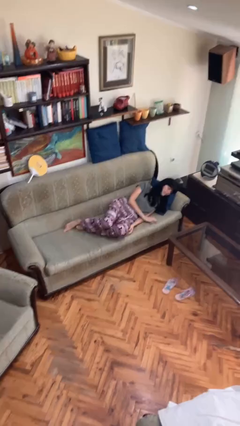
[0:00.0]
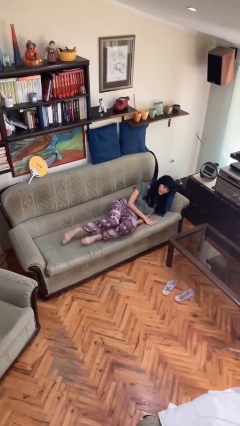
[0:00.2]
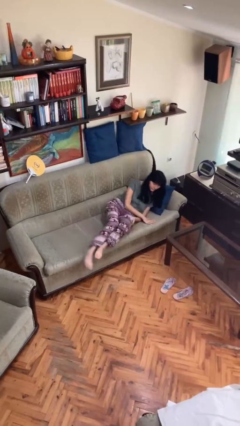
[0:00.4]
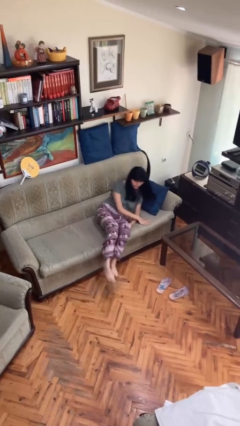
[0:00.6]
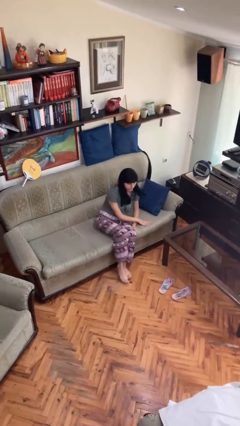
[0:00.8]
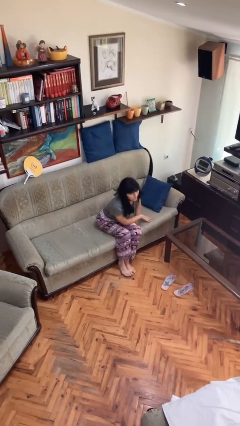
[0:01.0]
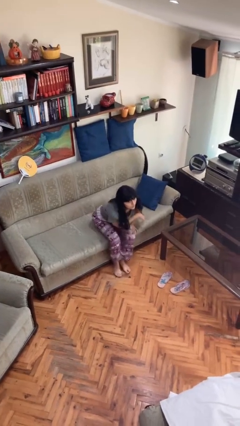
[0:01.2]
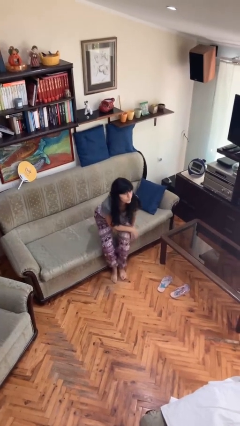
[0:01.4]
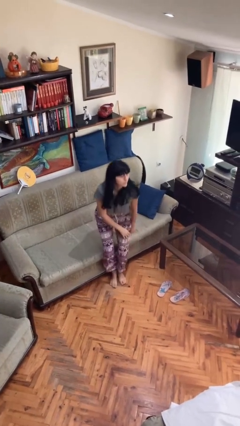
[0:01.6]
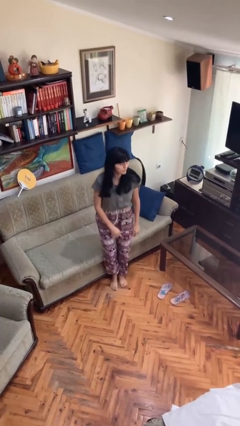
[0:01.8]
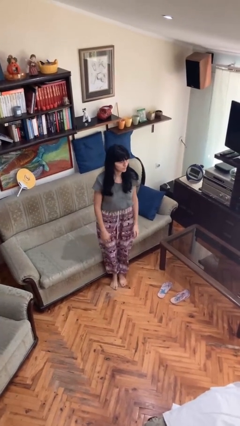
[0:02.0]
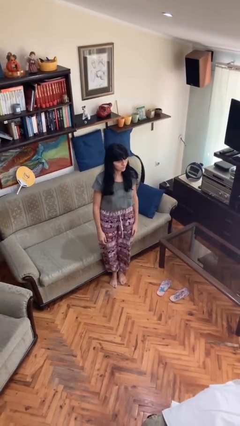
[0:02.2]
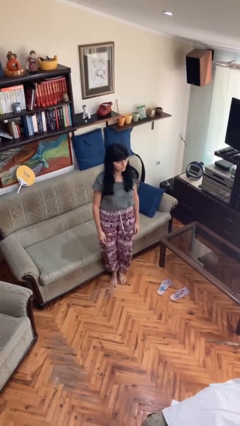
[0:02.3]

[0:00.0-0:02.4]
person stands up

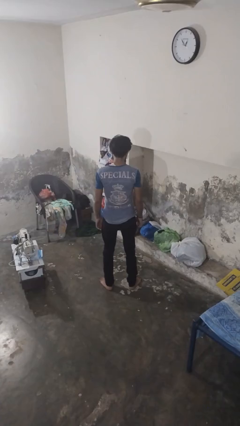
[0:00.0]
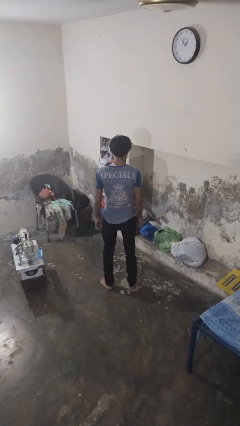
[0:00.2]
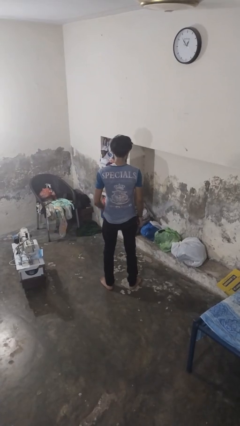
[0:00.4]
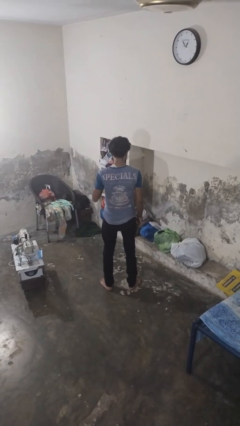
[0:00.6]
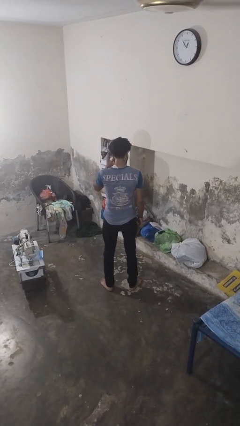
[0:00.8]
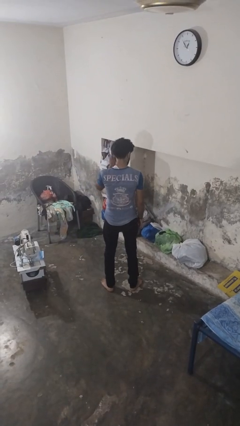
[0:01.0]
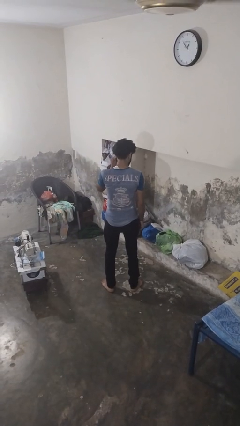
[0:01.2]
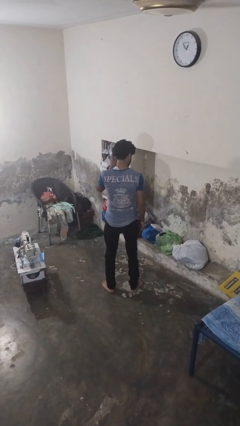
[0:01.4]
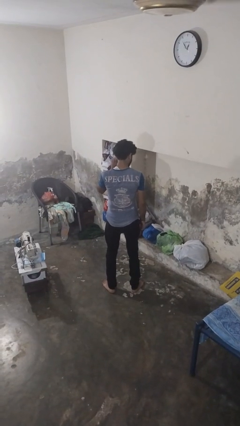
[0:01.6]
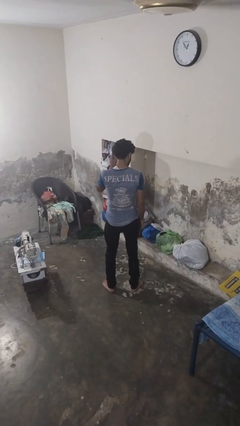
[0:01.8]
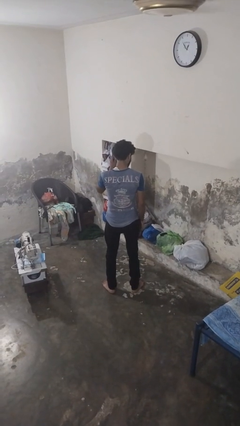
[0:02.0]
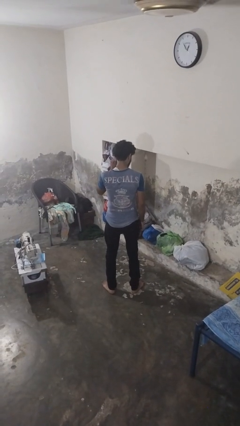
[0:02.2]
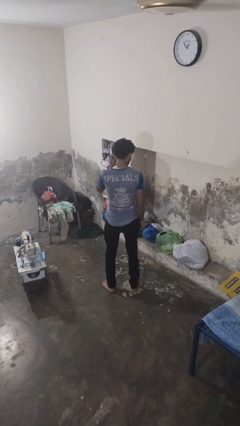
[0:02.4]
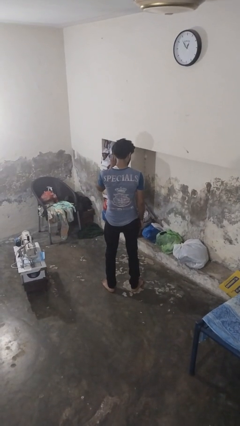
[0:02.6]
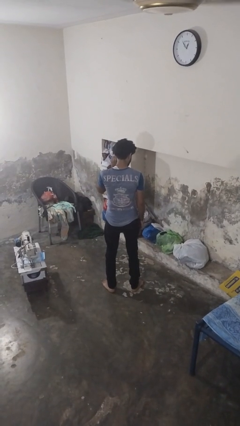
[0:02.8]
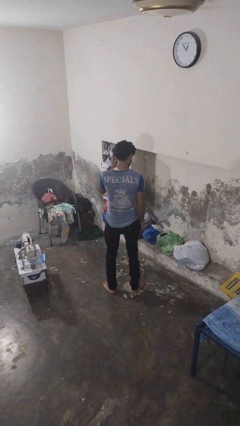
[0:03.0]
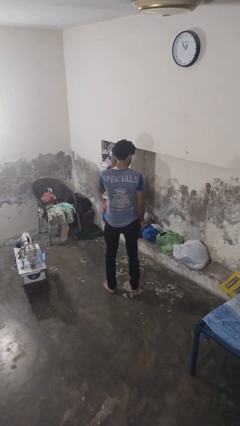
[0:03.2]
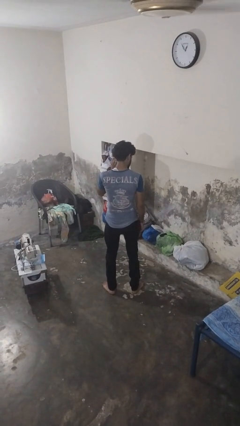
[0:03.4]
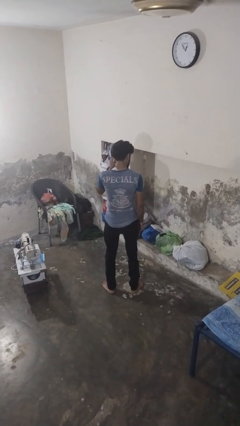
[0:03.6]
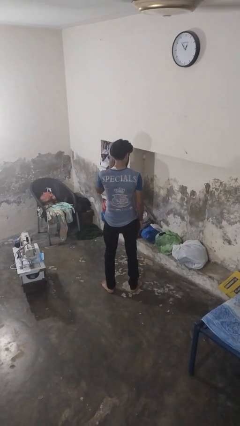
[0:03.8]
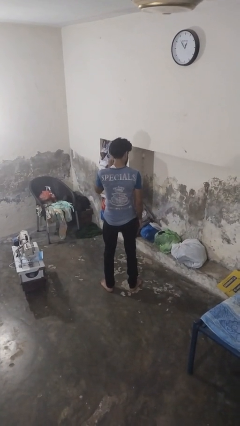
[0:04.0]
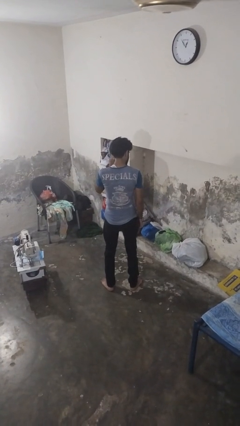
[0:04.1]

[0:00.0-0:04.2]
person touches earlobe

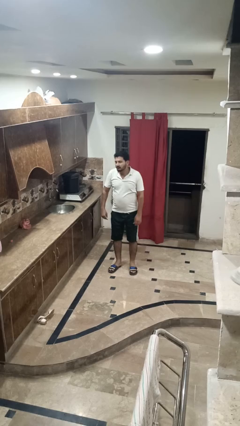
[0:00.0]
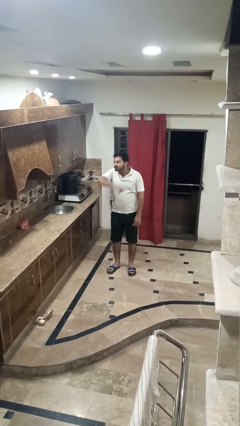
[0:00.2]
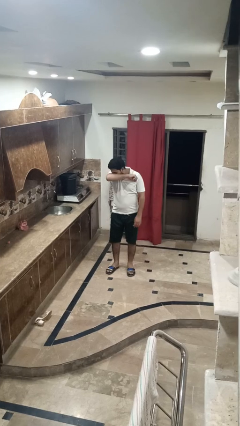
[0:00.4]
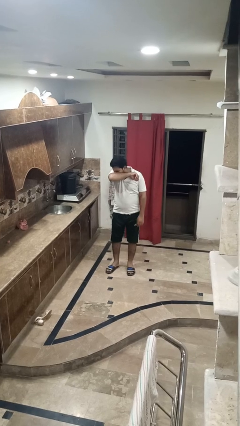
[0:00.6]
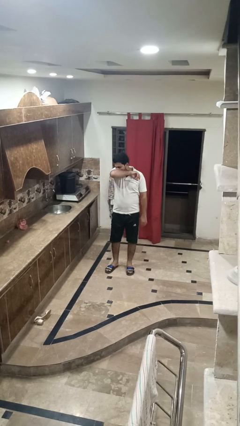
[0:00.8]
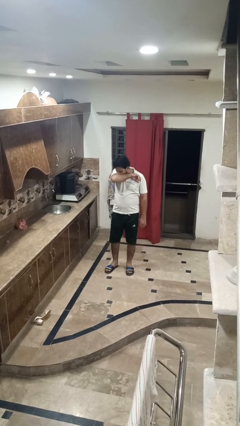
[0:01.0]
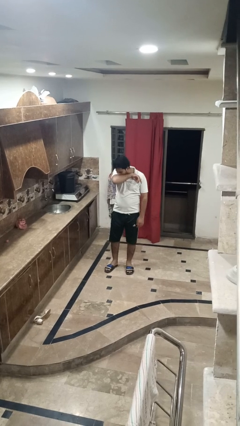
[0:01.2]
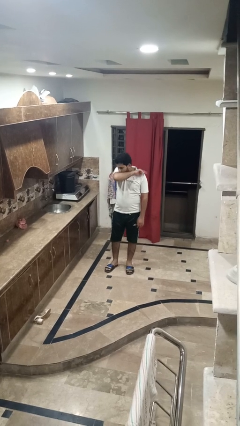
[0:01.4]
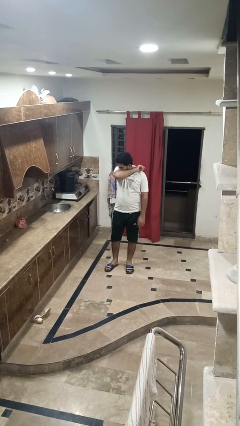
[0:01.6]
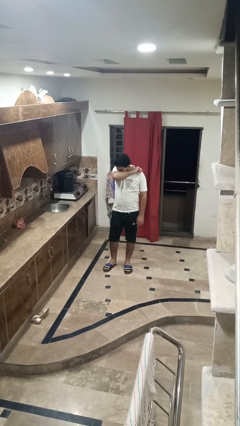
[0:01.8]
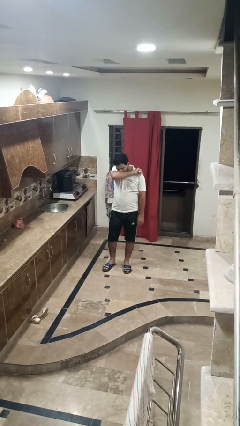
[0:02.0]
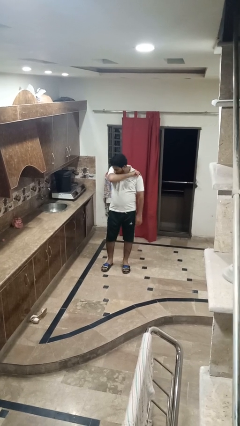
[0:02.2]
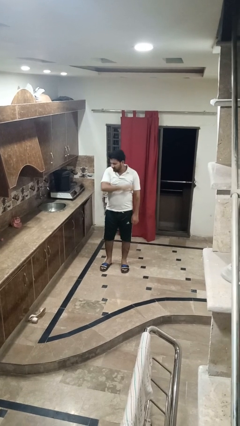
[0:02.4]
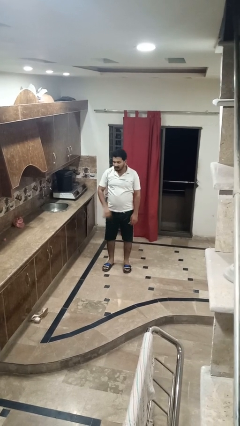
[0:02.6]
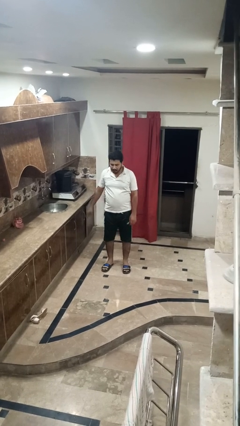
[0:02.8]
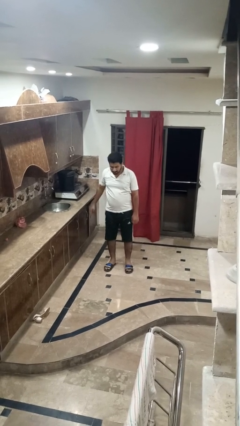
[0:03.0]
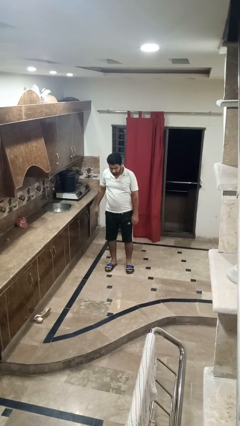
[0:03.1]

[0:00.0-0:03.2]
person sneezes into arm

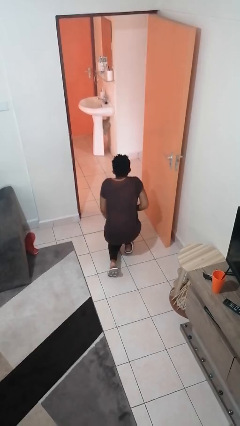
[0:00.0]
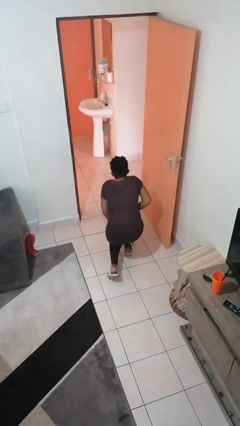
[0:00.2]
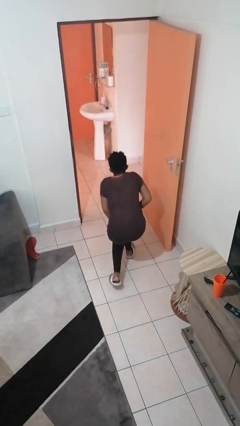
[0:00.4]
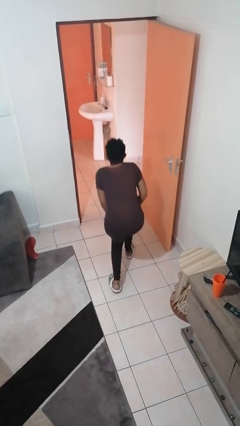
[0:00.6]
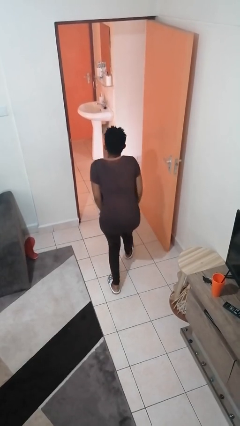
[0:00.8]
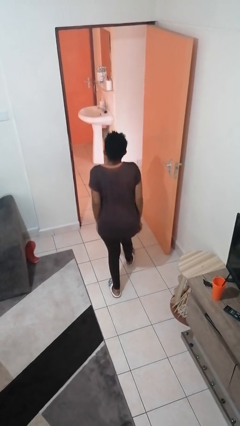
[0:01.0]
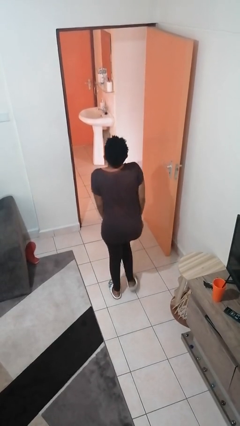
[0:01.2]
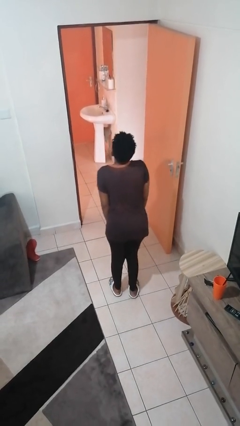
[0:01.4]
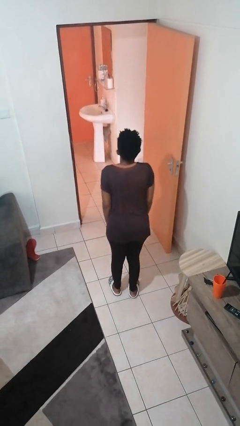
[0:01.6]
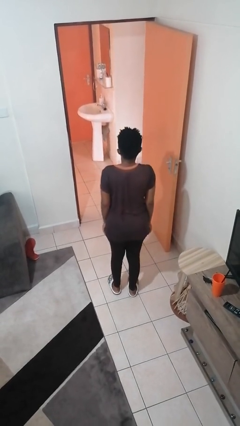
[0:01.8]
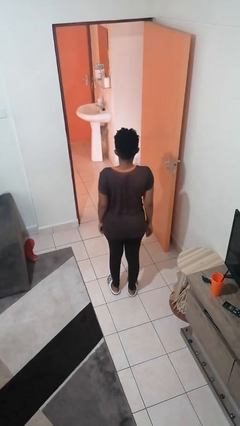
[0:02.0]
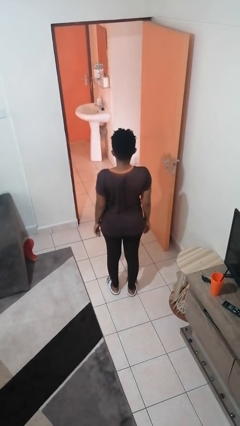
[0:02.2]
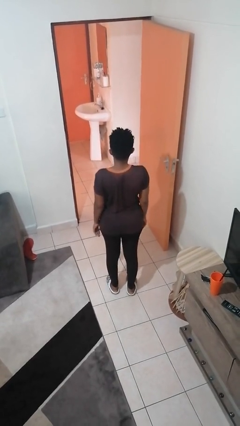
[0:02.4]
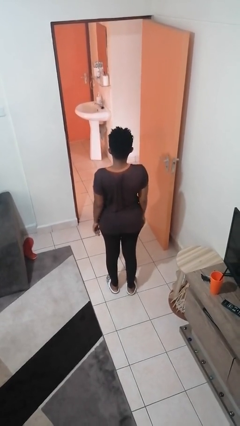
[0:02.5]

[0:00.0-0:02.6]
person stands up from floor

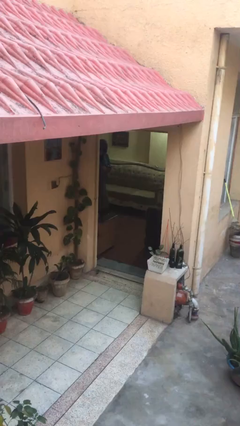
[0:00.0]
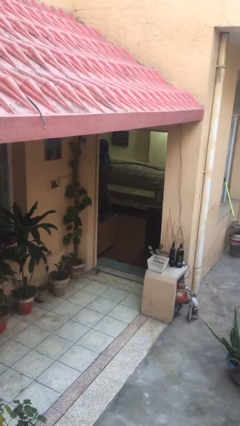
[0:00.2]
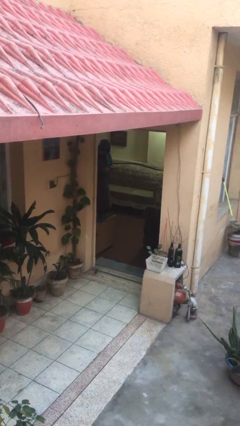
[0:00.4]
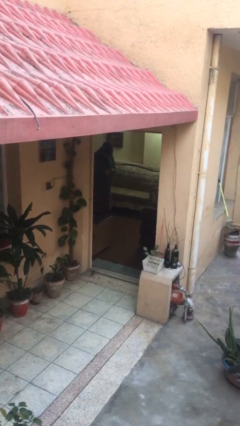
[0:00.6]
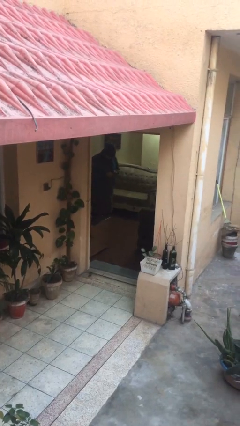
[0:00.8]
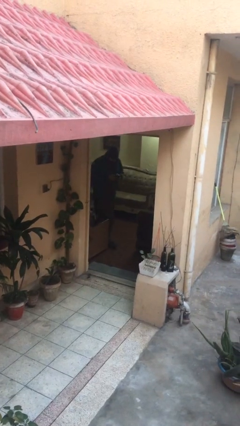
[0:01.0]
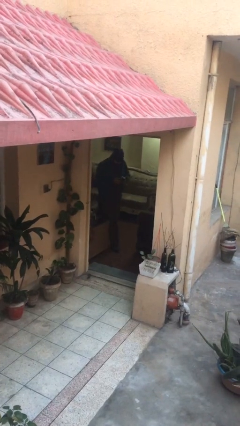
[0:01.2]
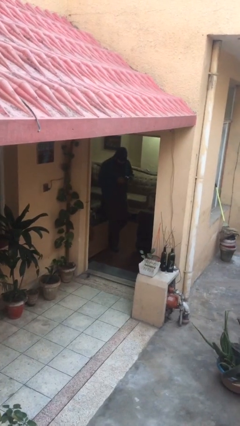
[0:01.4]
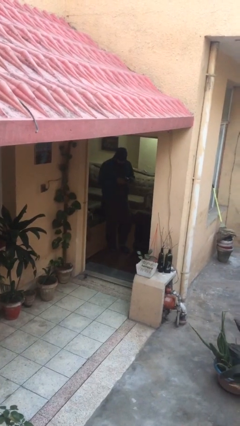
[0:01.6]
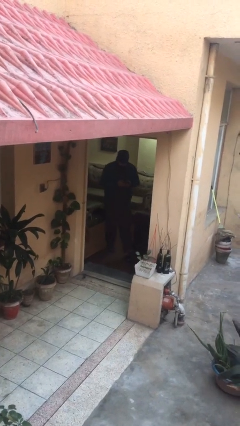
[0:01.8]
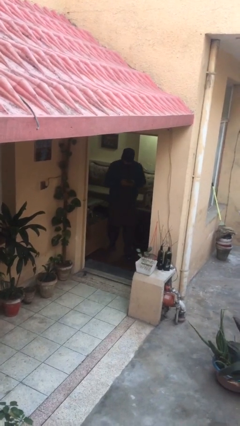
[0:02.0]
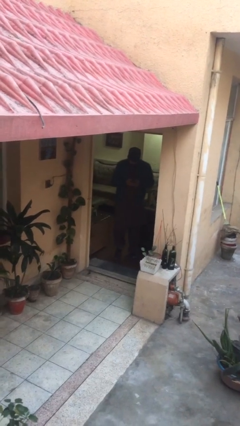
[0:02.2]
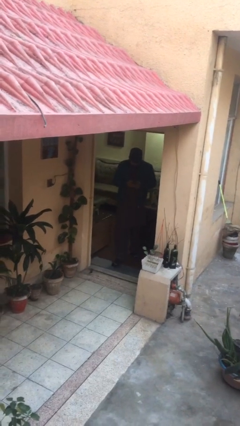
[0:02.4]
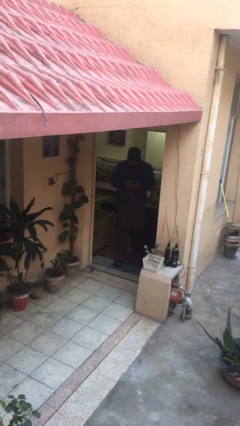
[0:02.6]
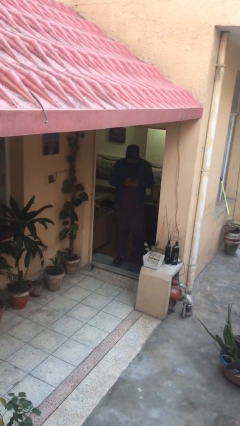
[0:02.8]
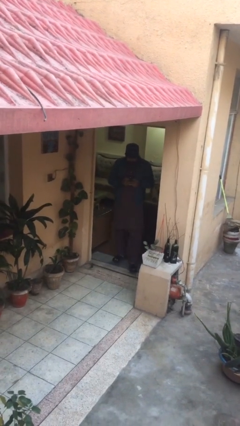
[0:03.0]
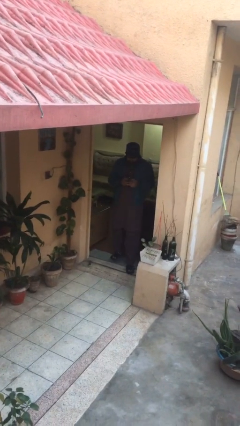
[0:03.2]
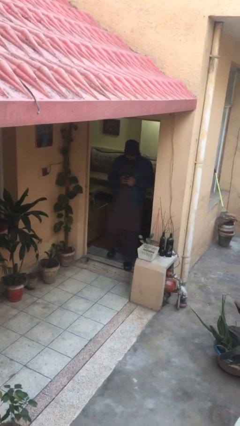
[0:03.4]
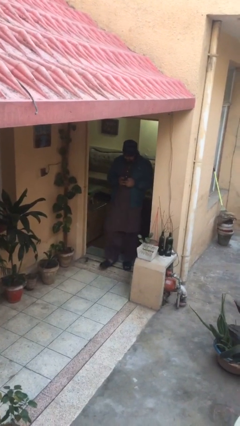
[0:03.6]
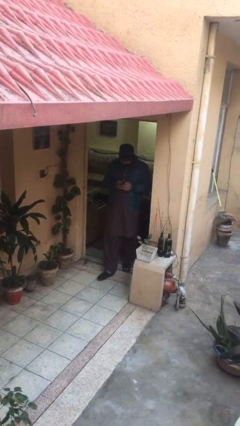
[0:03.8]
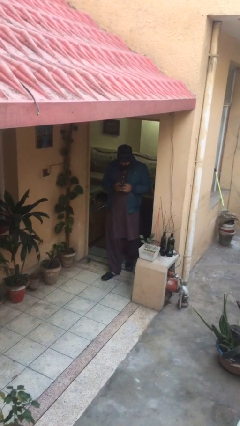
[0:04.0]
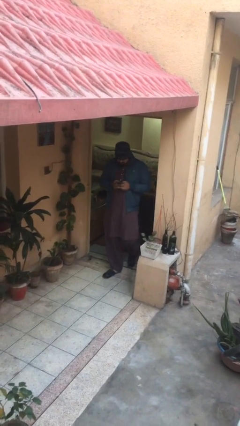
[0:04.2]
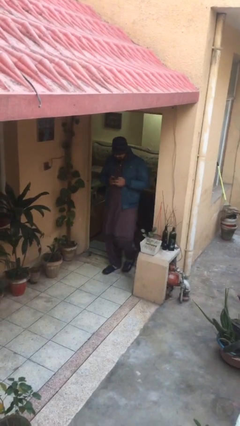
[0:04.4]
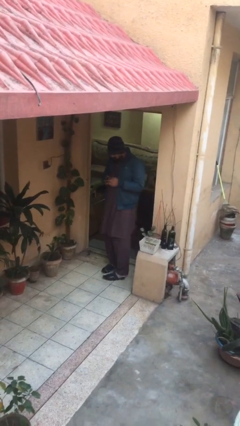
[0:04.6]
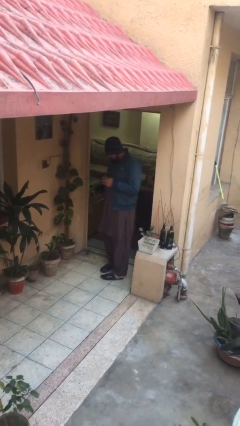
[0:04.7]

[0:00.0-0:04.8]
person enters scene through structure

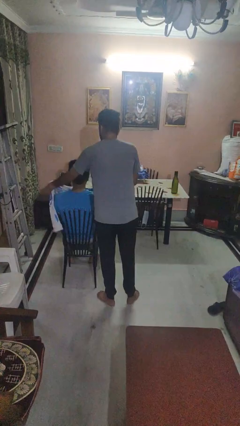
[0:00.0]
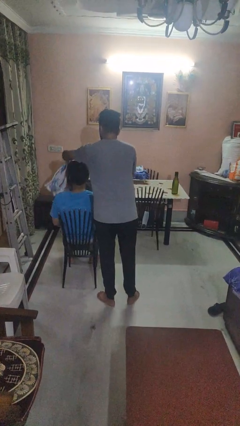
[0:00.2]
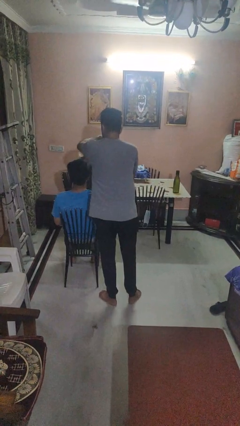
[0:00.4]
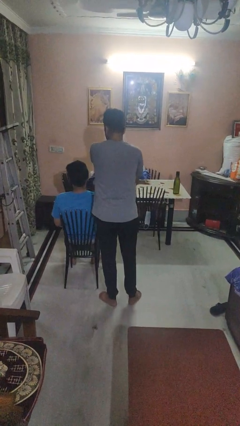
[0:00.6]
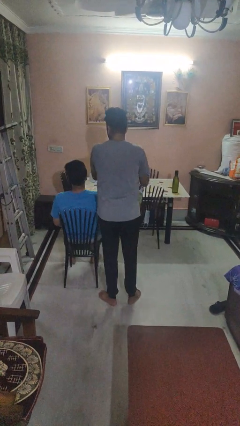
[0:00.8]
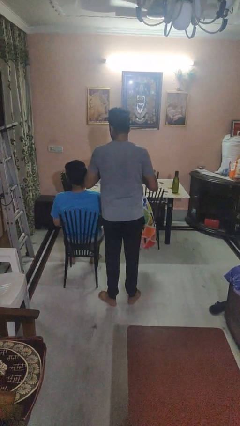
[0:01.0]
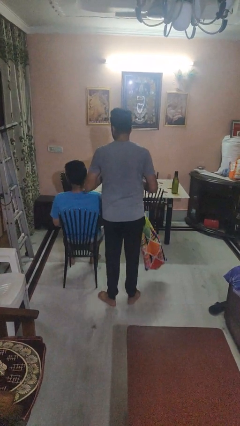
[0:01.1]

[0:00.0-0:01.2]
person uncovers friend with blanket
